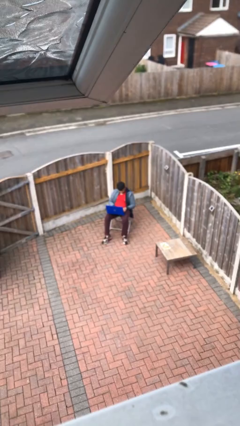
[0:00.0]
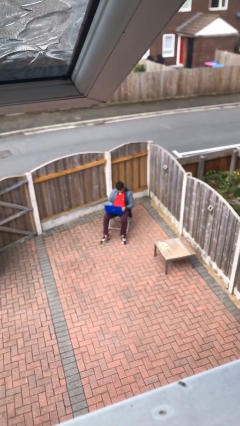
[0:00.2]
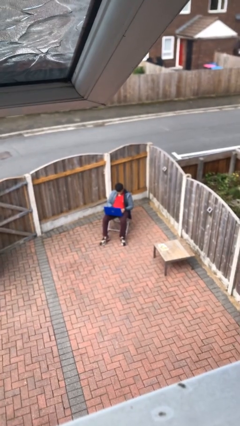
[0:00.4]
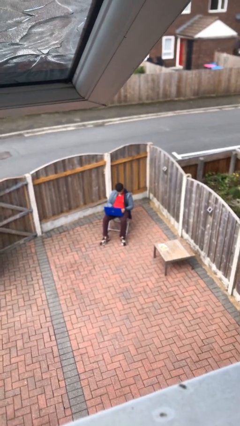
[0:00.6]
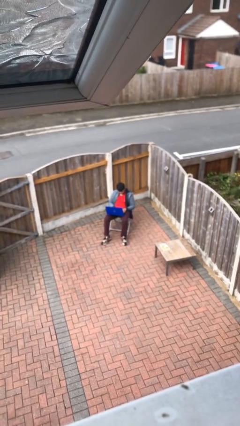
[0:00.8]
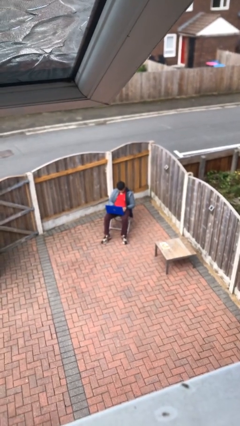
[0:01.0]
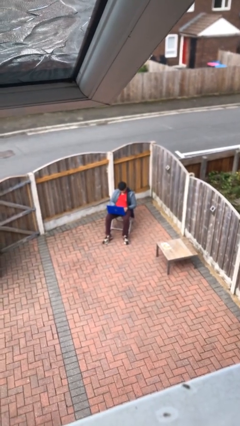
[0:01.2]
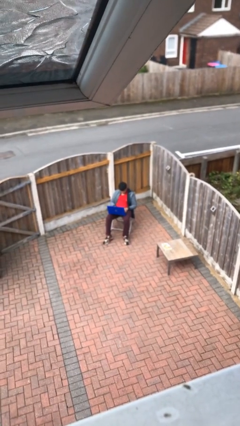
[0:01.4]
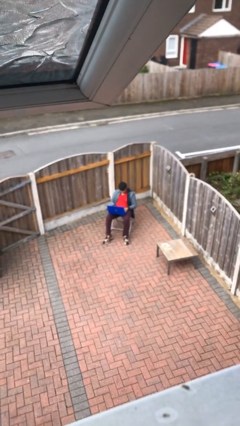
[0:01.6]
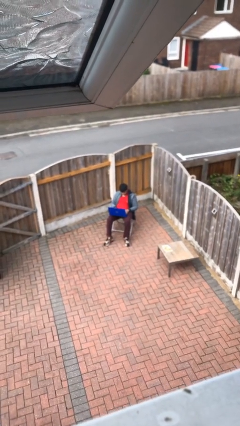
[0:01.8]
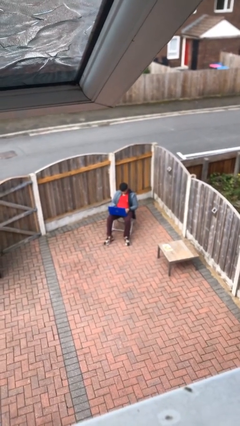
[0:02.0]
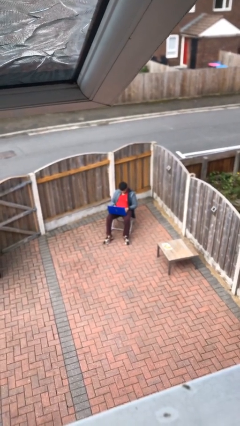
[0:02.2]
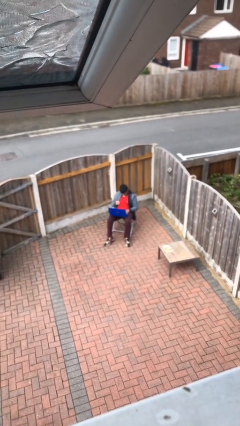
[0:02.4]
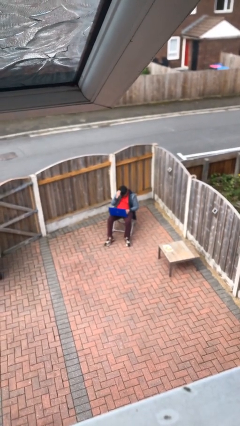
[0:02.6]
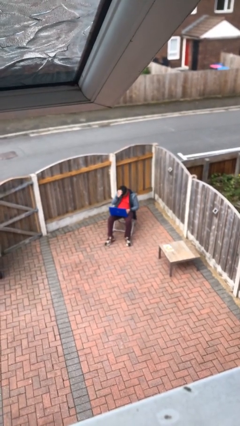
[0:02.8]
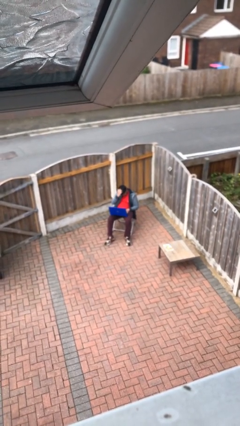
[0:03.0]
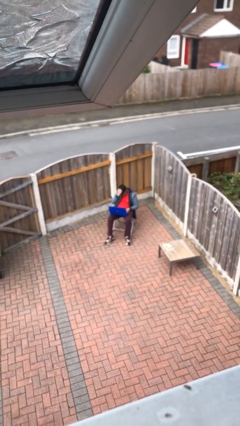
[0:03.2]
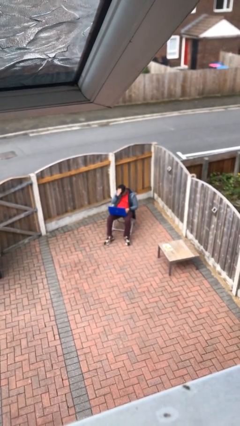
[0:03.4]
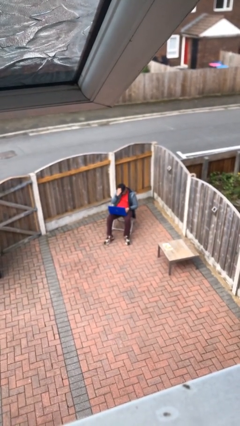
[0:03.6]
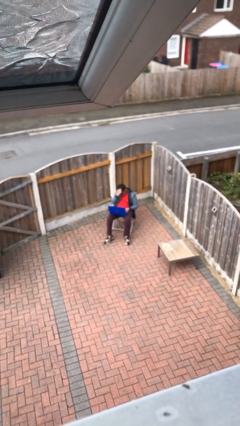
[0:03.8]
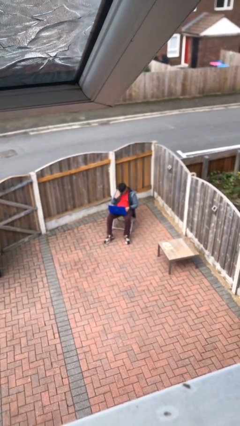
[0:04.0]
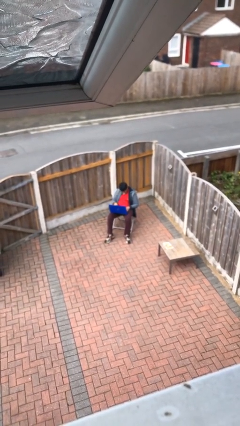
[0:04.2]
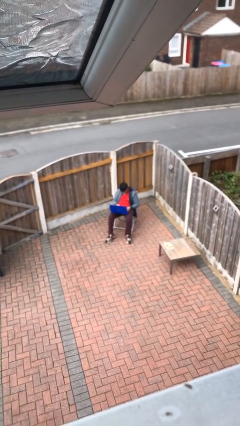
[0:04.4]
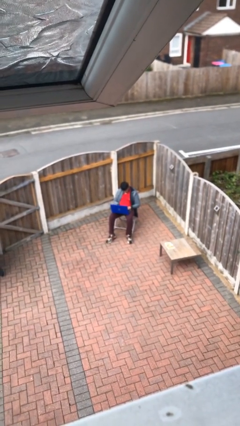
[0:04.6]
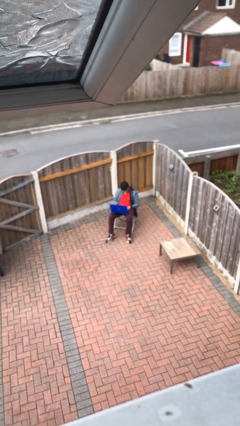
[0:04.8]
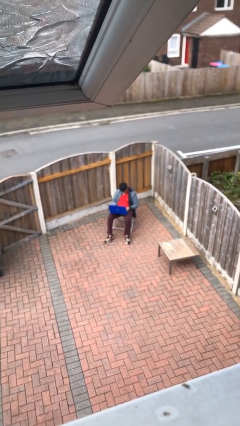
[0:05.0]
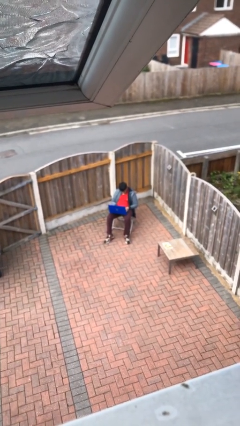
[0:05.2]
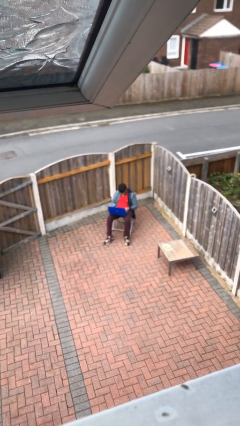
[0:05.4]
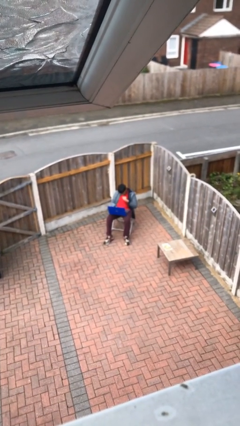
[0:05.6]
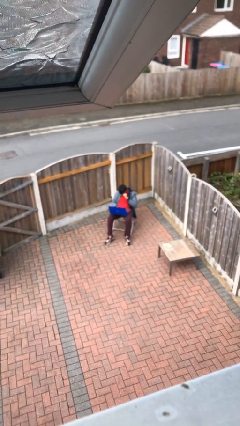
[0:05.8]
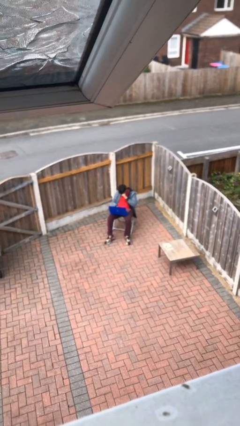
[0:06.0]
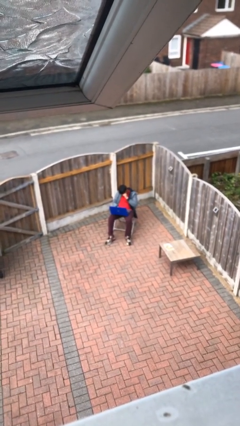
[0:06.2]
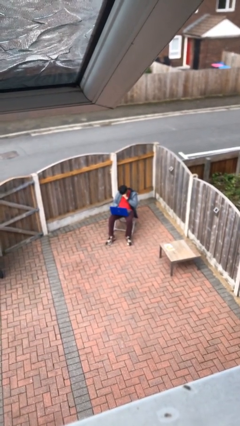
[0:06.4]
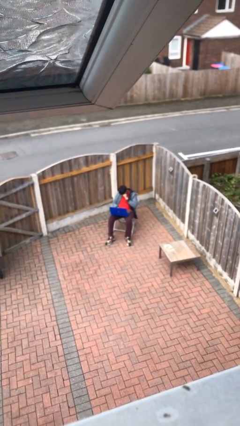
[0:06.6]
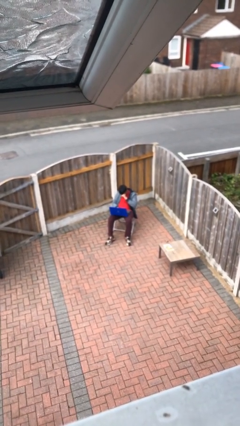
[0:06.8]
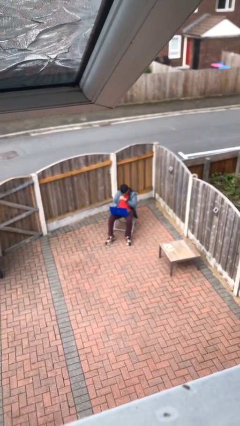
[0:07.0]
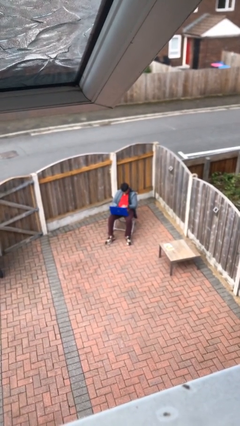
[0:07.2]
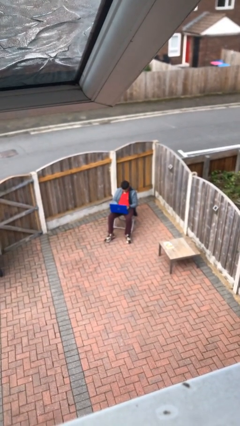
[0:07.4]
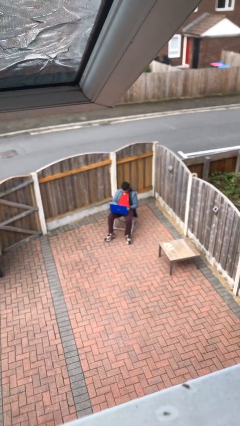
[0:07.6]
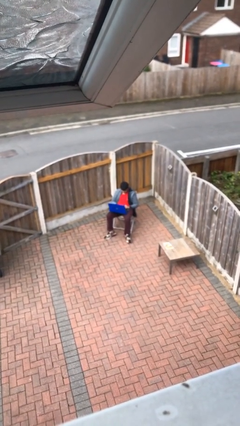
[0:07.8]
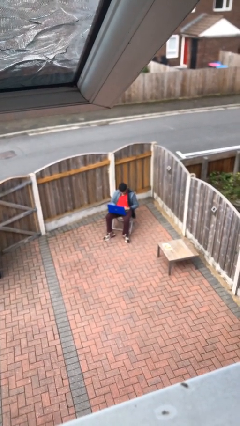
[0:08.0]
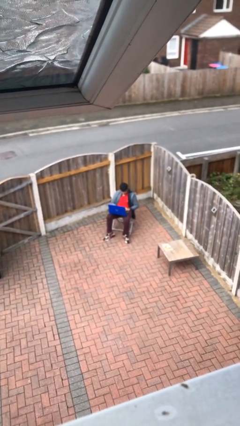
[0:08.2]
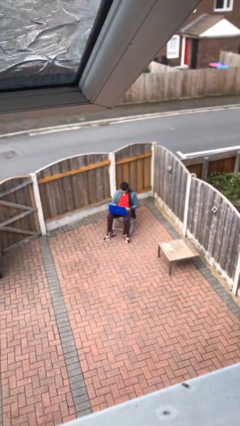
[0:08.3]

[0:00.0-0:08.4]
person interacts with laptop

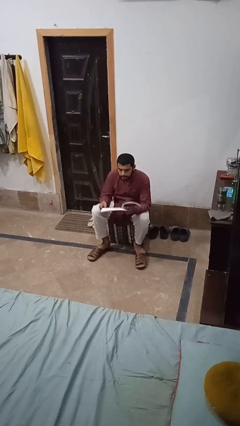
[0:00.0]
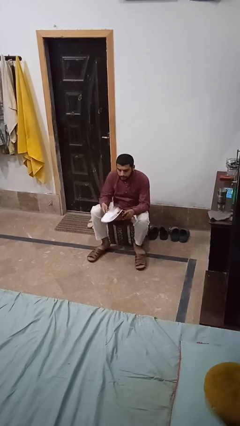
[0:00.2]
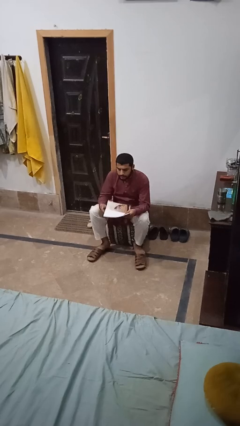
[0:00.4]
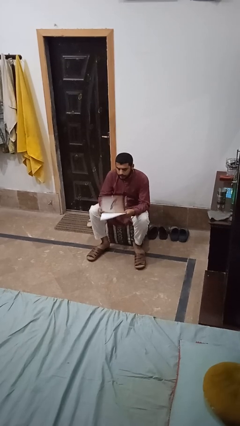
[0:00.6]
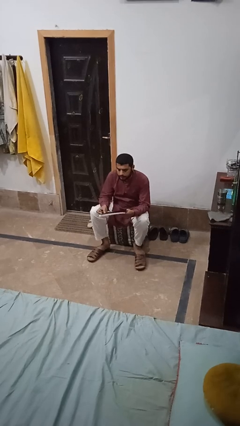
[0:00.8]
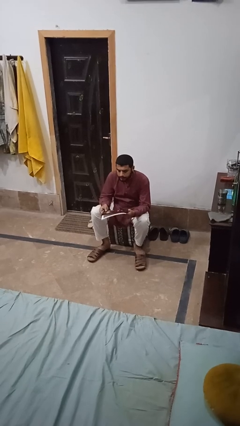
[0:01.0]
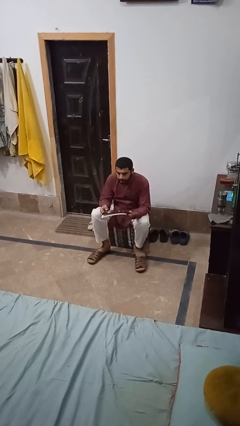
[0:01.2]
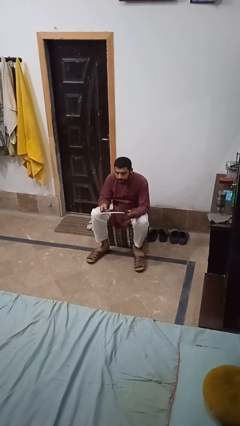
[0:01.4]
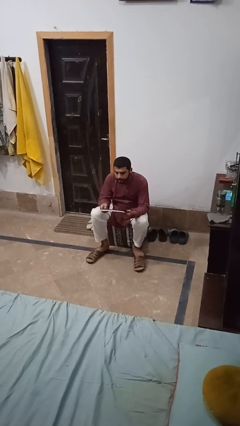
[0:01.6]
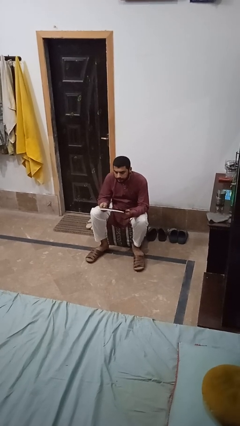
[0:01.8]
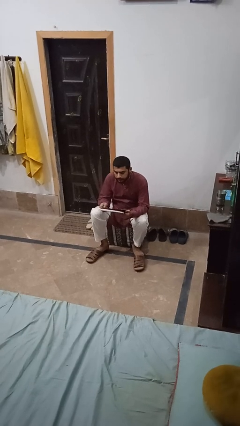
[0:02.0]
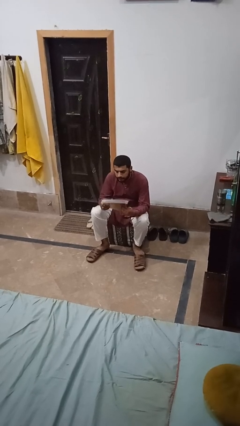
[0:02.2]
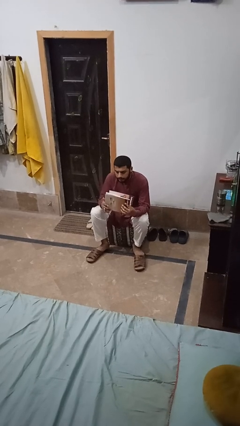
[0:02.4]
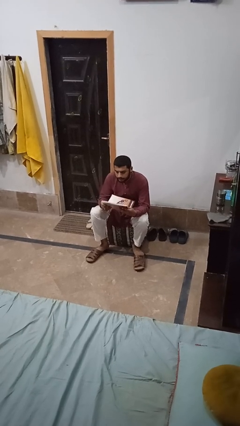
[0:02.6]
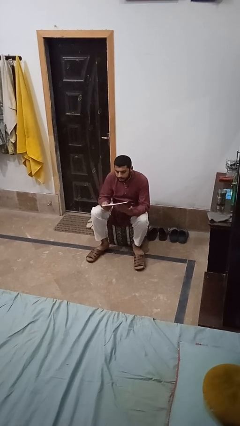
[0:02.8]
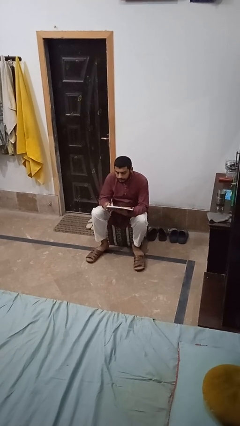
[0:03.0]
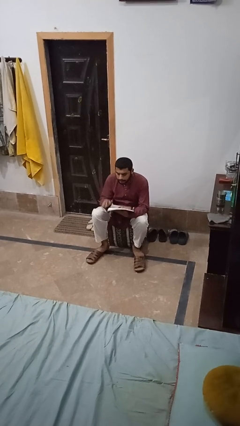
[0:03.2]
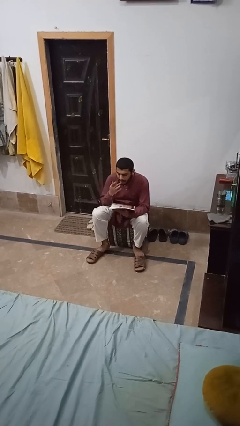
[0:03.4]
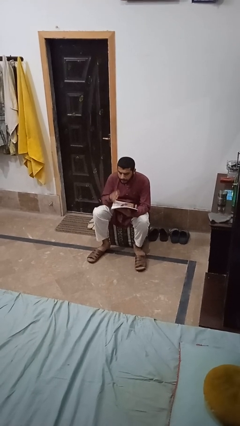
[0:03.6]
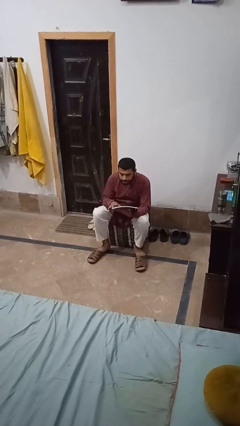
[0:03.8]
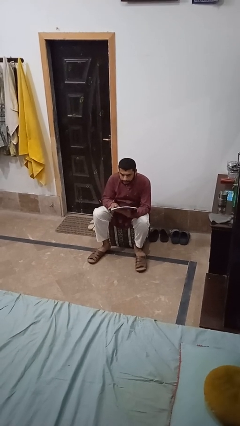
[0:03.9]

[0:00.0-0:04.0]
person sits crisscross

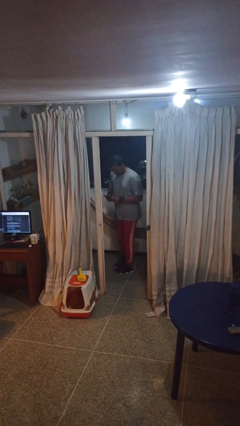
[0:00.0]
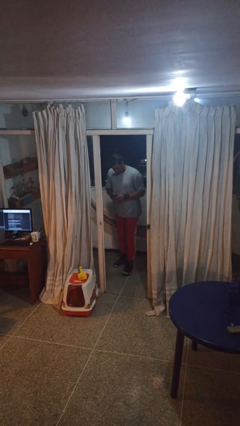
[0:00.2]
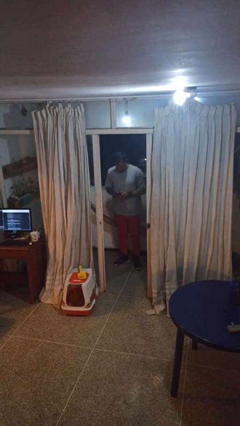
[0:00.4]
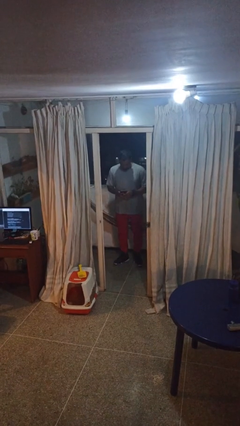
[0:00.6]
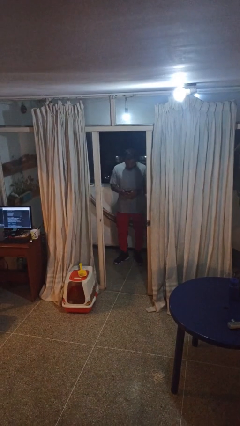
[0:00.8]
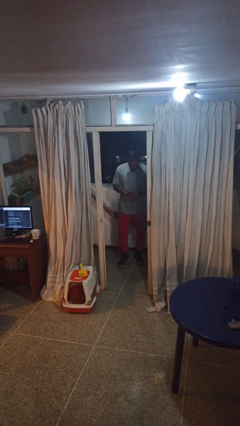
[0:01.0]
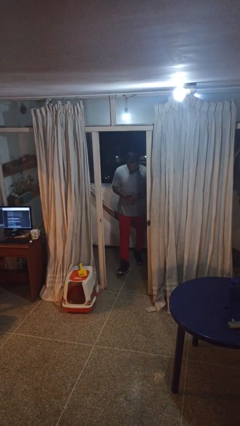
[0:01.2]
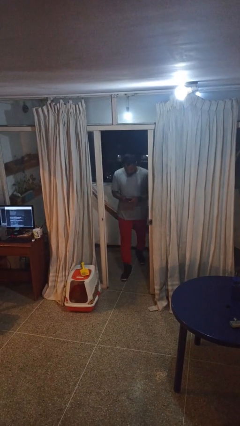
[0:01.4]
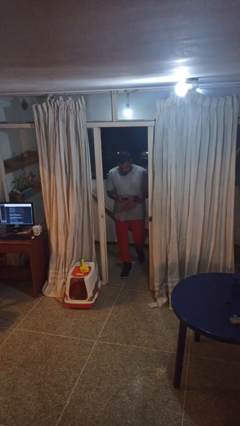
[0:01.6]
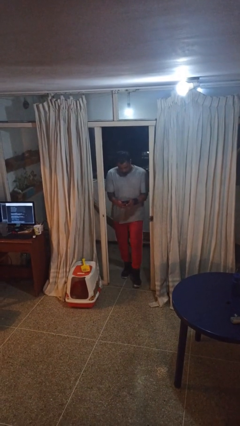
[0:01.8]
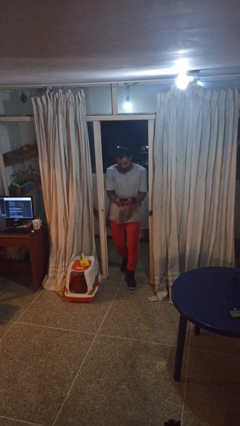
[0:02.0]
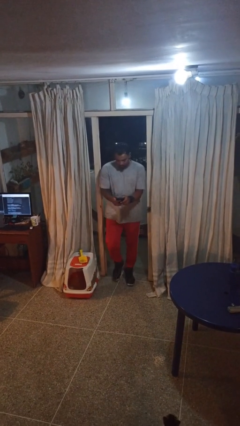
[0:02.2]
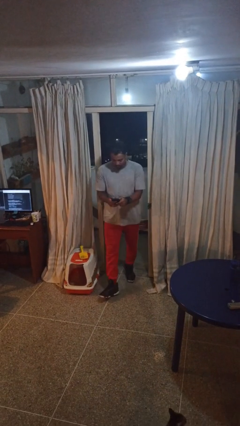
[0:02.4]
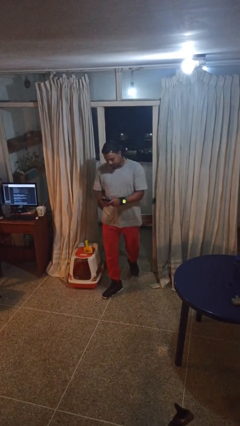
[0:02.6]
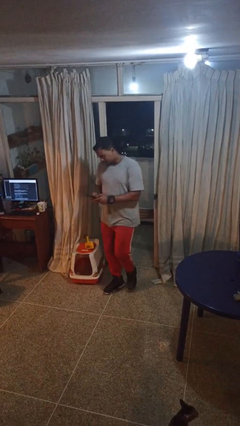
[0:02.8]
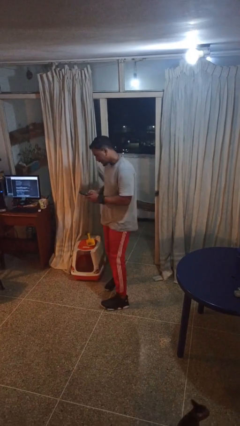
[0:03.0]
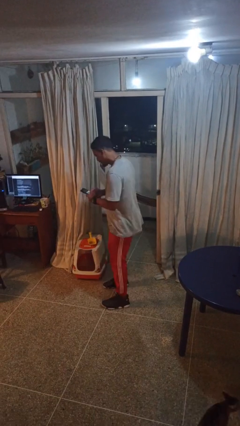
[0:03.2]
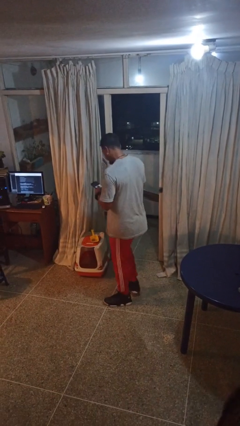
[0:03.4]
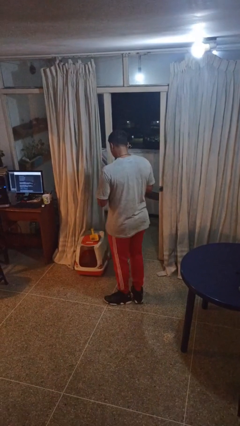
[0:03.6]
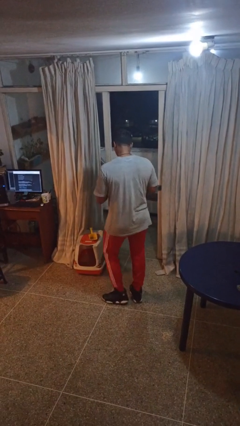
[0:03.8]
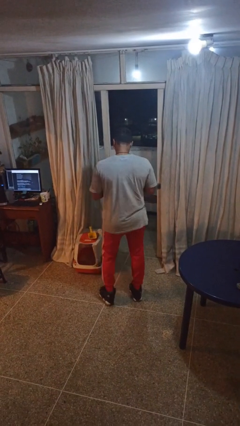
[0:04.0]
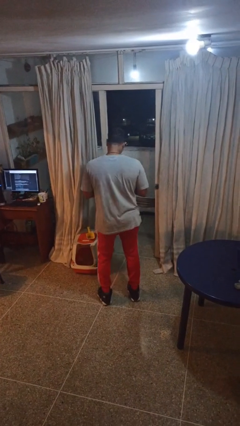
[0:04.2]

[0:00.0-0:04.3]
person enters scene through structure

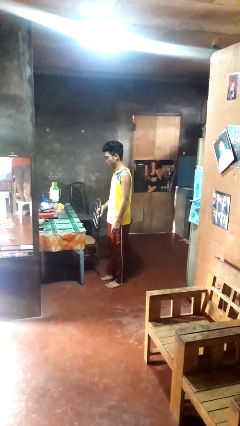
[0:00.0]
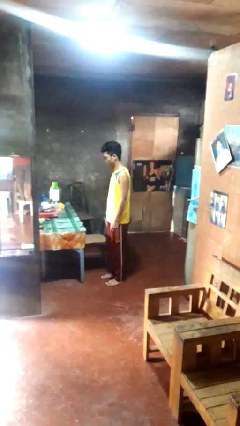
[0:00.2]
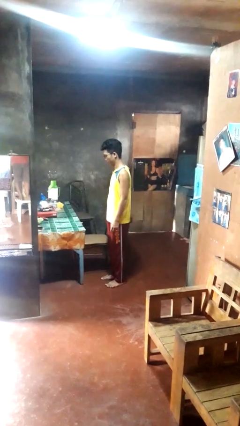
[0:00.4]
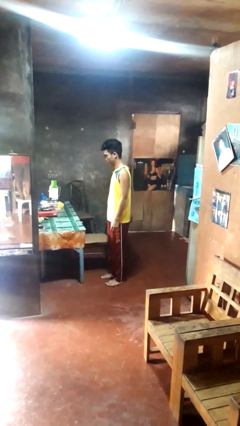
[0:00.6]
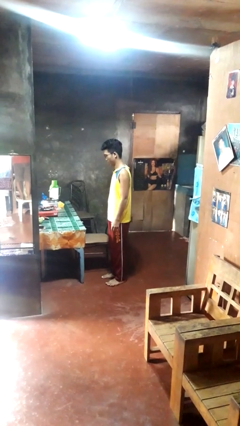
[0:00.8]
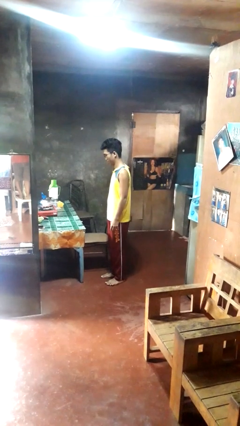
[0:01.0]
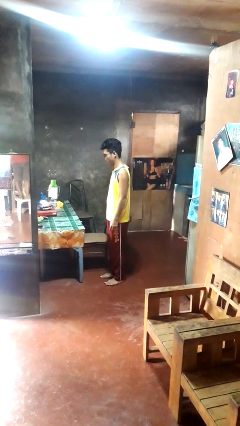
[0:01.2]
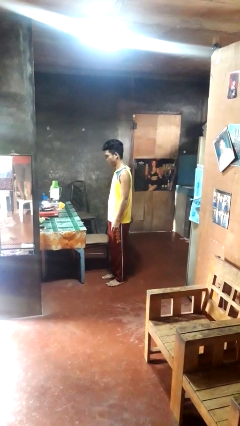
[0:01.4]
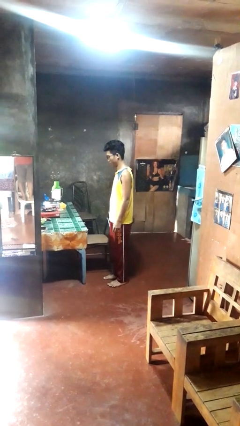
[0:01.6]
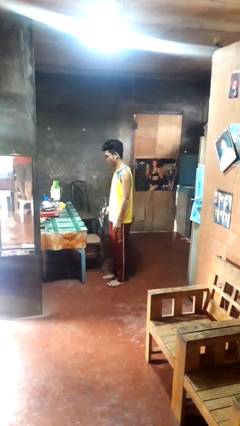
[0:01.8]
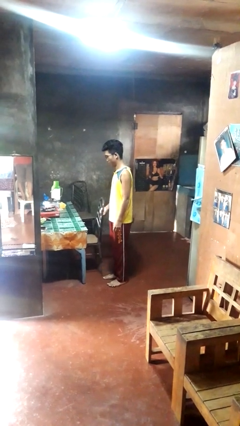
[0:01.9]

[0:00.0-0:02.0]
person pulls out chair
